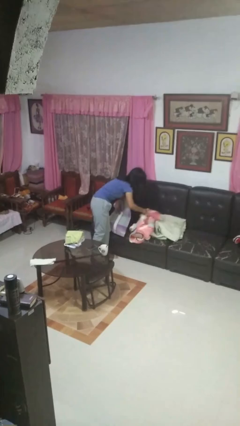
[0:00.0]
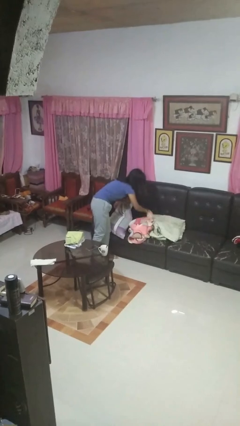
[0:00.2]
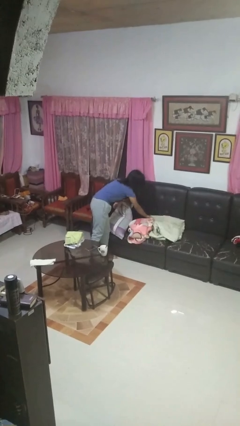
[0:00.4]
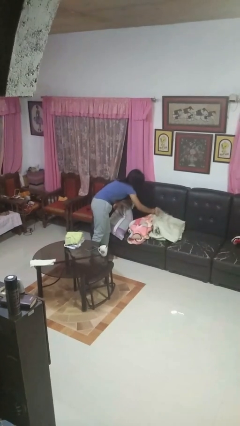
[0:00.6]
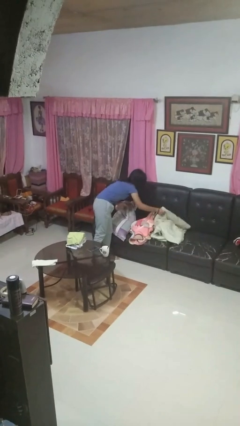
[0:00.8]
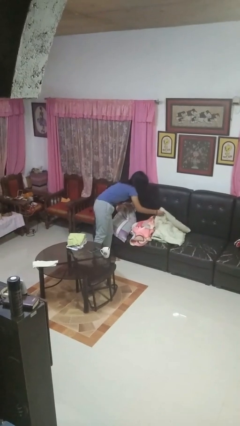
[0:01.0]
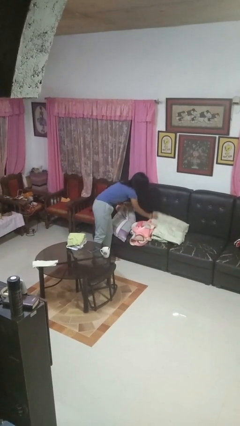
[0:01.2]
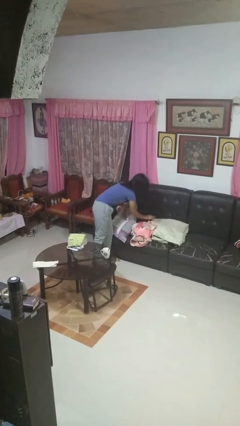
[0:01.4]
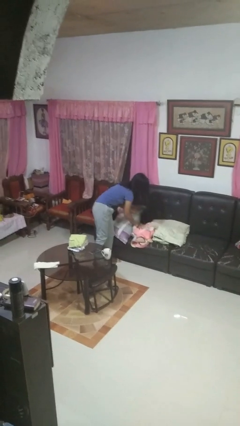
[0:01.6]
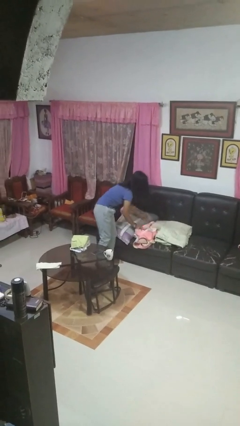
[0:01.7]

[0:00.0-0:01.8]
person searches in couch

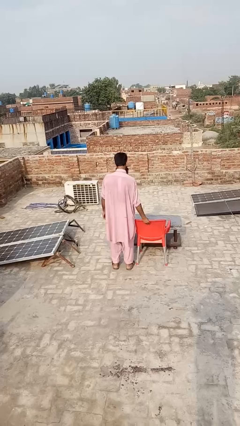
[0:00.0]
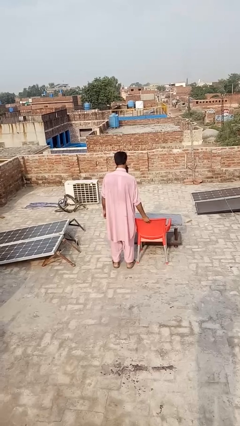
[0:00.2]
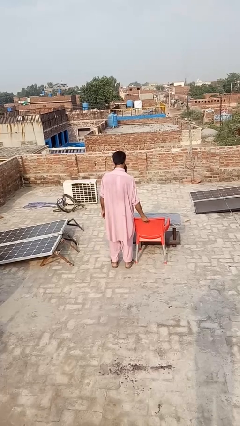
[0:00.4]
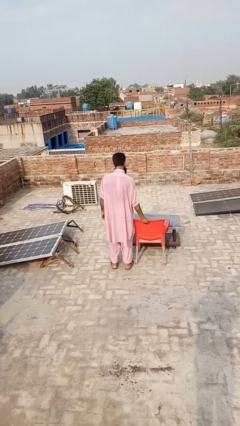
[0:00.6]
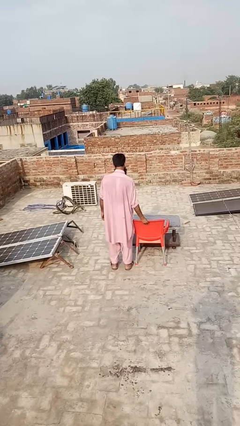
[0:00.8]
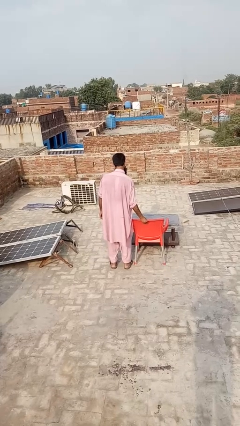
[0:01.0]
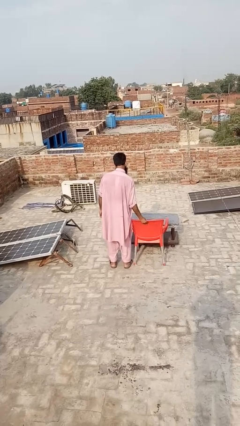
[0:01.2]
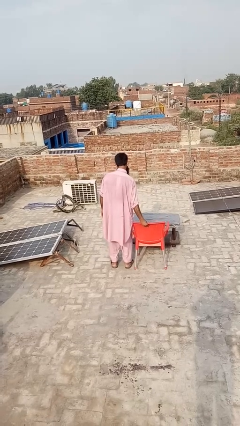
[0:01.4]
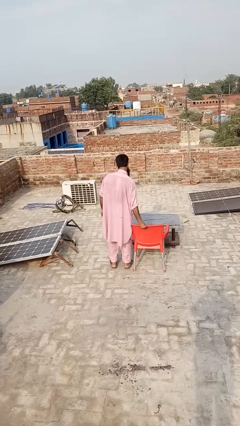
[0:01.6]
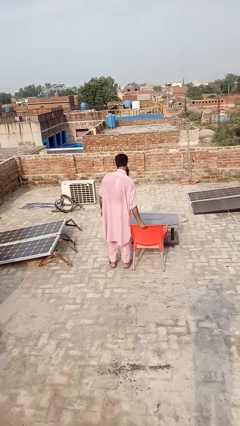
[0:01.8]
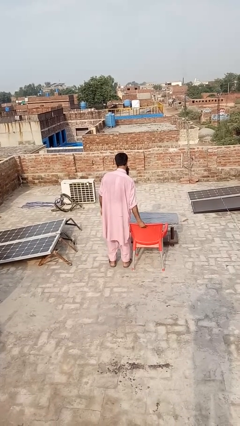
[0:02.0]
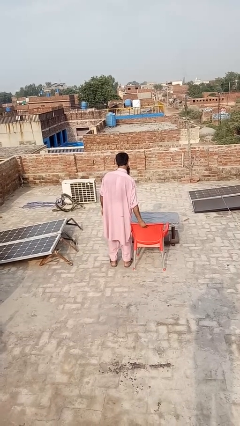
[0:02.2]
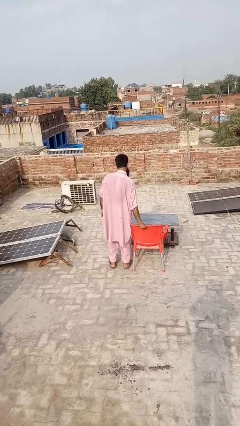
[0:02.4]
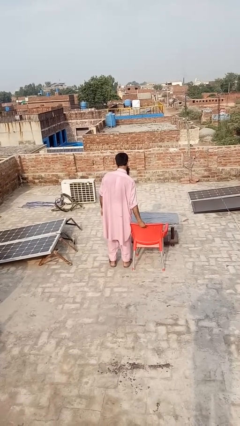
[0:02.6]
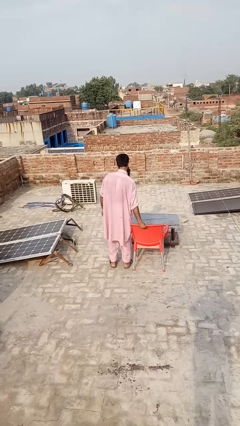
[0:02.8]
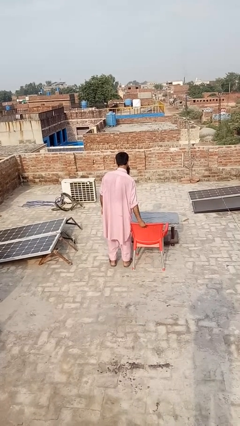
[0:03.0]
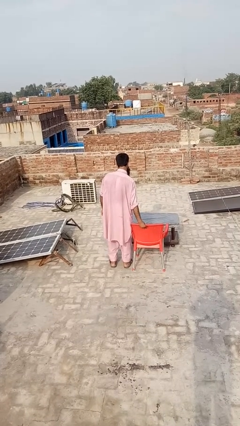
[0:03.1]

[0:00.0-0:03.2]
person pulls out chair

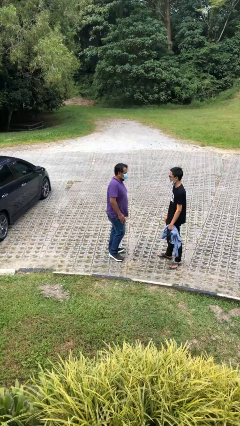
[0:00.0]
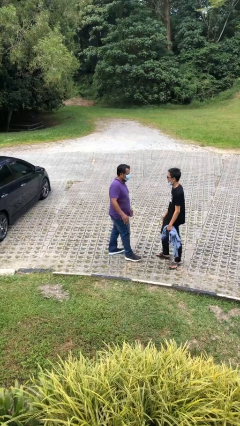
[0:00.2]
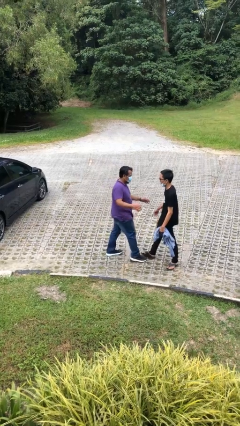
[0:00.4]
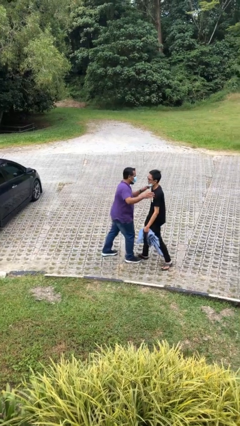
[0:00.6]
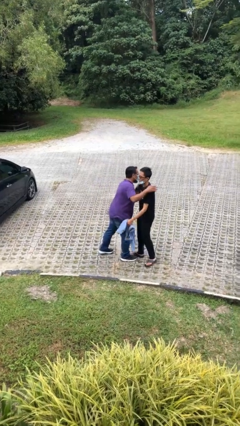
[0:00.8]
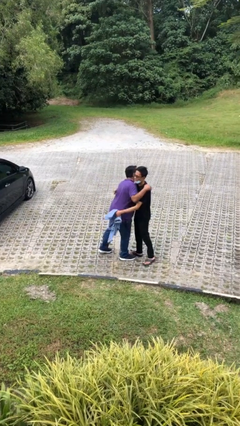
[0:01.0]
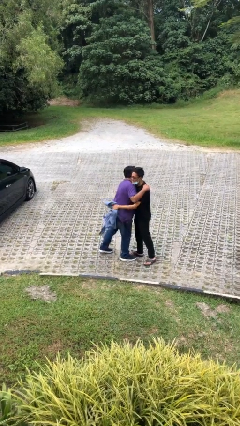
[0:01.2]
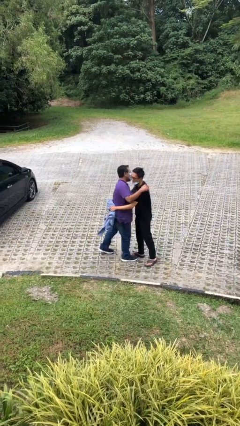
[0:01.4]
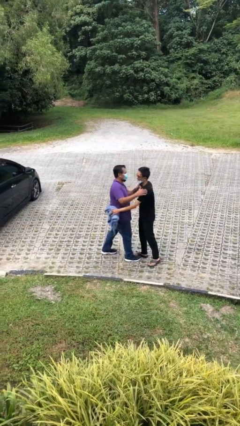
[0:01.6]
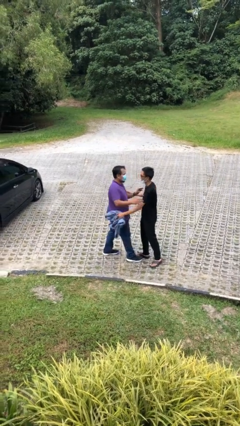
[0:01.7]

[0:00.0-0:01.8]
person embraces person

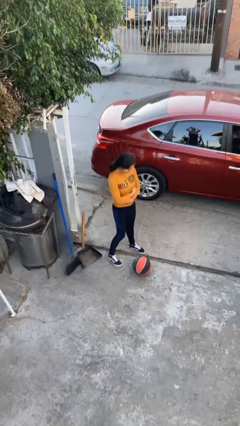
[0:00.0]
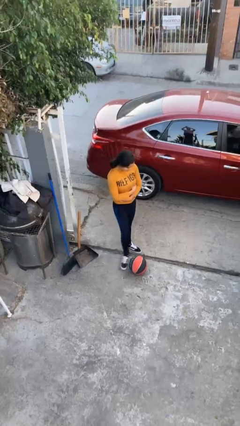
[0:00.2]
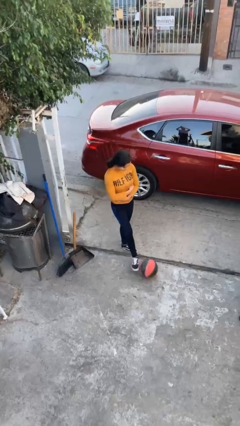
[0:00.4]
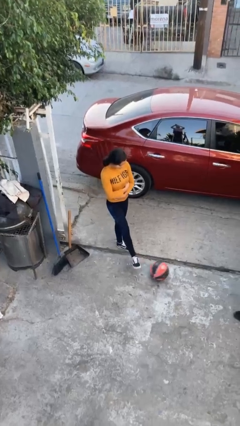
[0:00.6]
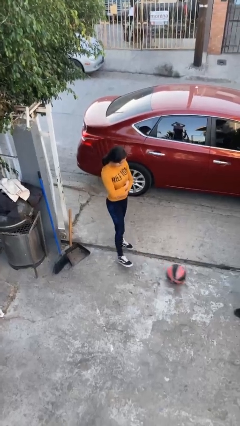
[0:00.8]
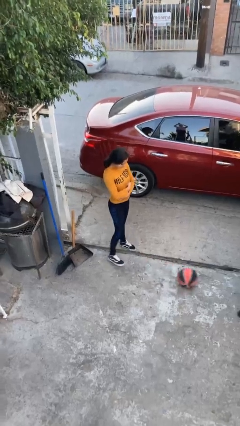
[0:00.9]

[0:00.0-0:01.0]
person kicks object to person

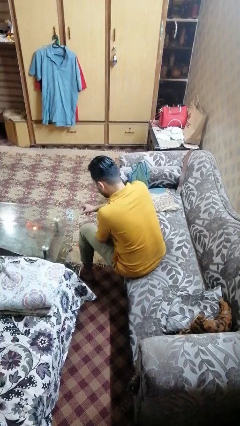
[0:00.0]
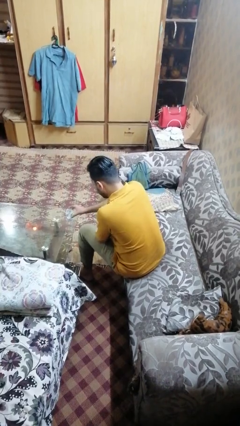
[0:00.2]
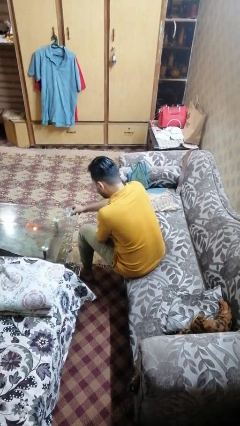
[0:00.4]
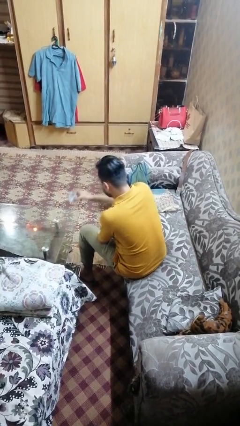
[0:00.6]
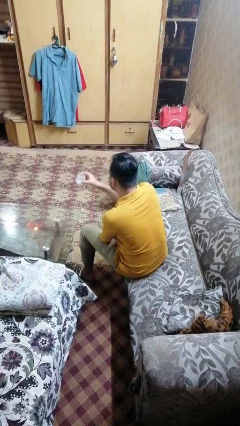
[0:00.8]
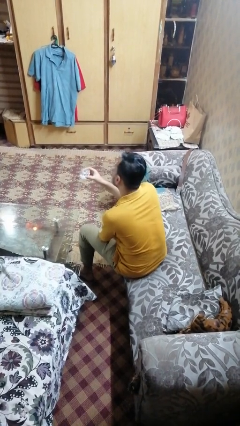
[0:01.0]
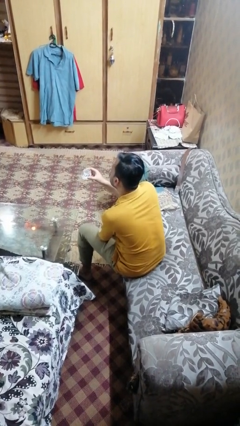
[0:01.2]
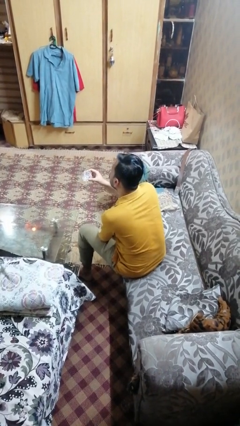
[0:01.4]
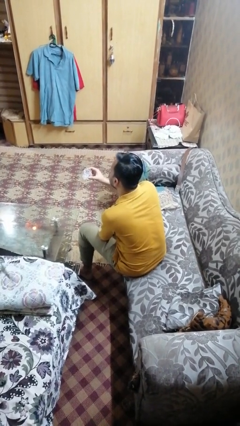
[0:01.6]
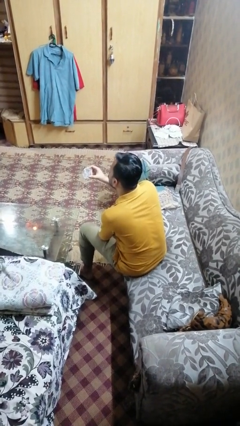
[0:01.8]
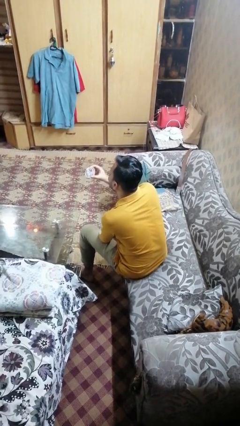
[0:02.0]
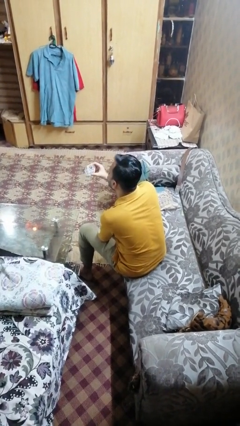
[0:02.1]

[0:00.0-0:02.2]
person picks up object from table

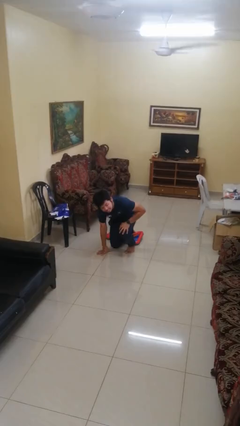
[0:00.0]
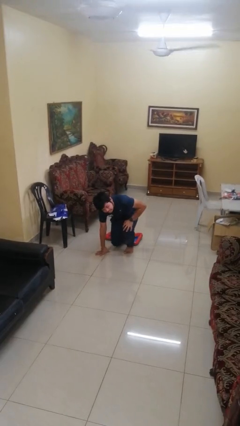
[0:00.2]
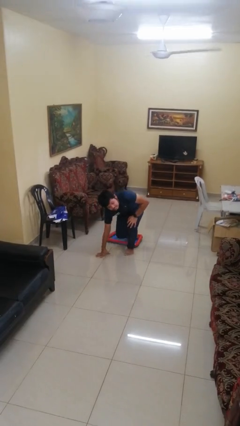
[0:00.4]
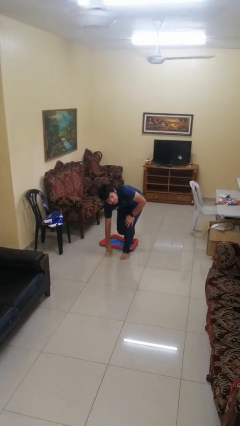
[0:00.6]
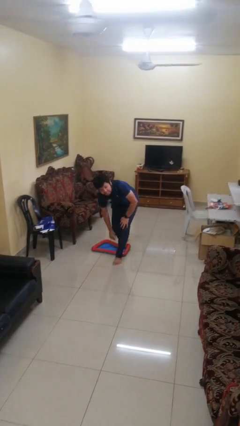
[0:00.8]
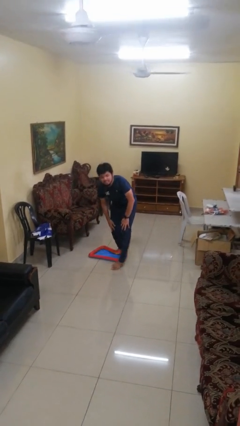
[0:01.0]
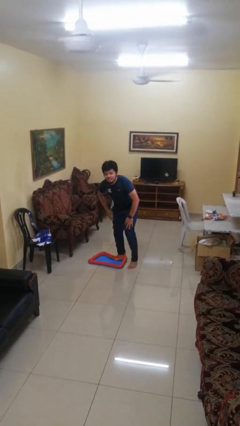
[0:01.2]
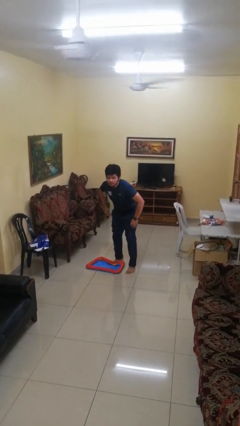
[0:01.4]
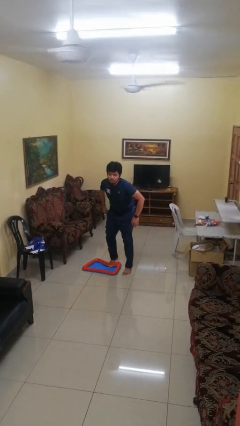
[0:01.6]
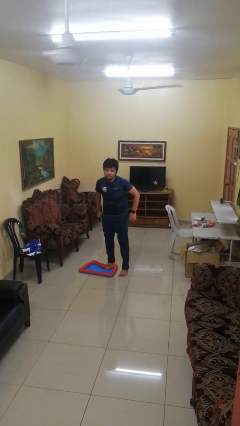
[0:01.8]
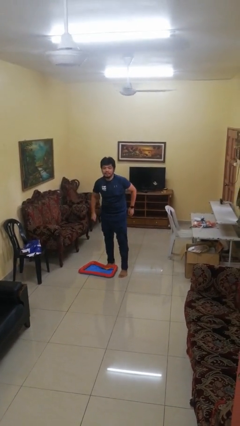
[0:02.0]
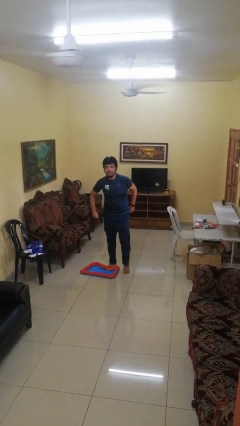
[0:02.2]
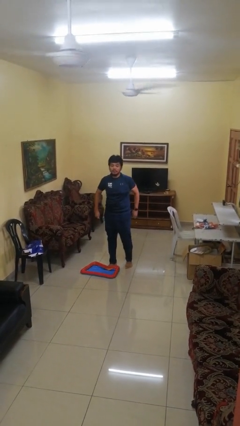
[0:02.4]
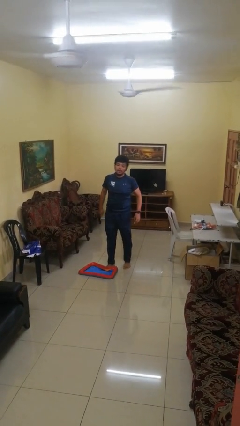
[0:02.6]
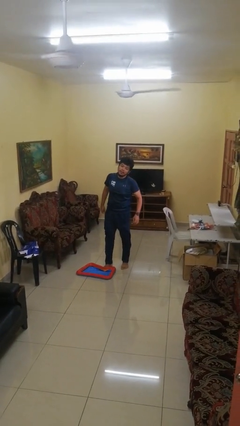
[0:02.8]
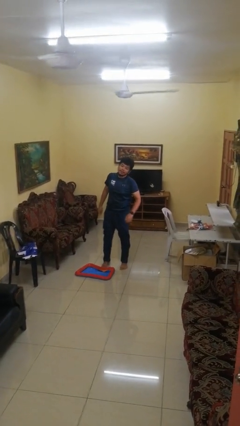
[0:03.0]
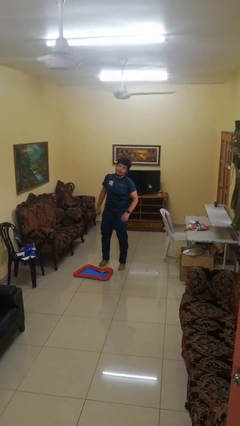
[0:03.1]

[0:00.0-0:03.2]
person stands up from floor

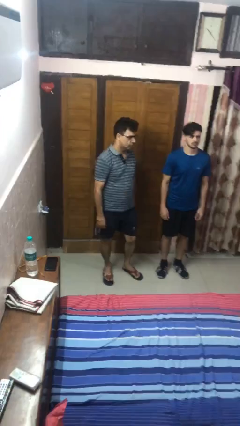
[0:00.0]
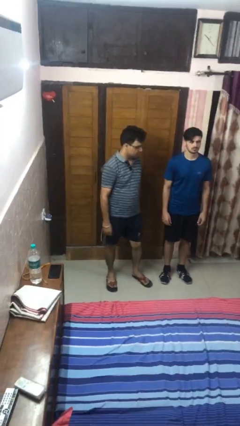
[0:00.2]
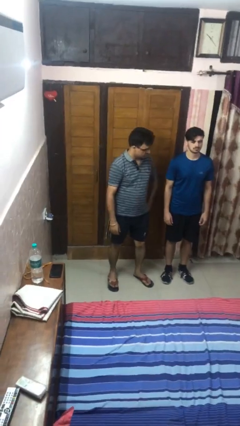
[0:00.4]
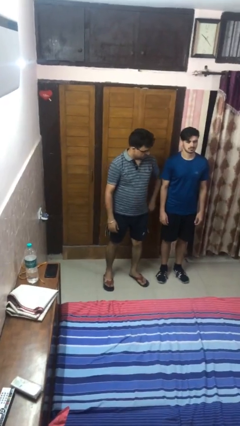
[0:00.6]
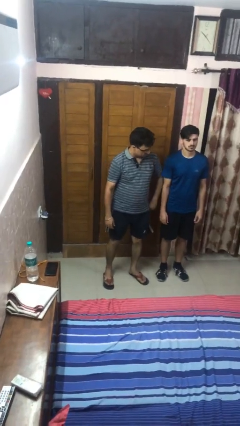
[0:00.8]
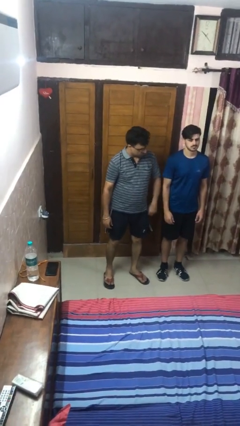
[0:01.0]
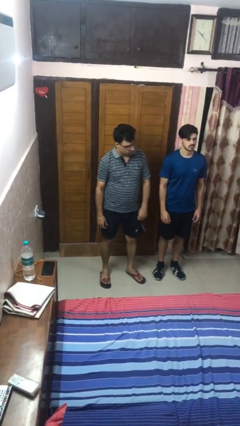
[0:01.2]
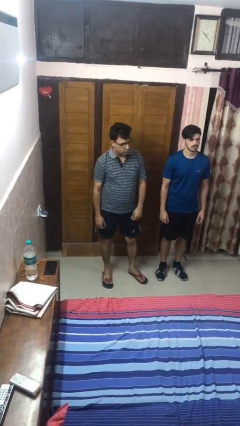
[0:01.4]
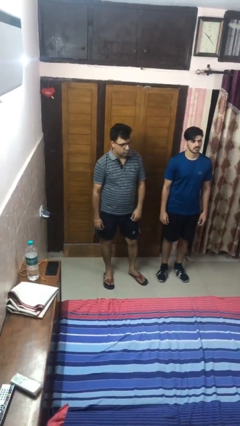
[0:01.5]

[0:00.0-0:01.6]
person nudges person with elbow

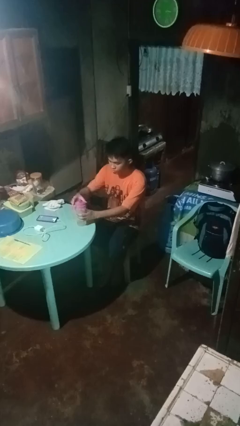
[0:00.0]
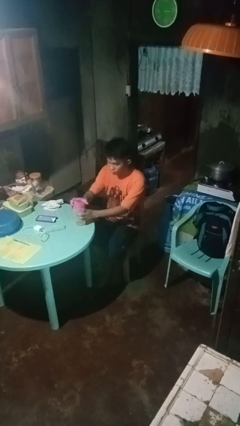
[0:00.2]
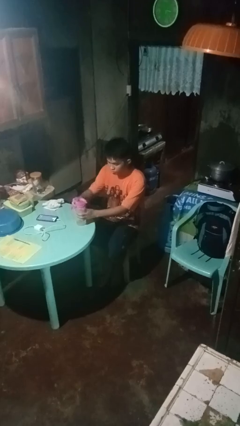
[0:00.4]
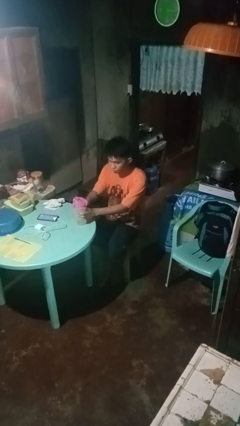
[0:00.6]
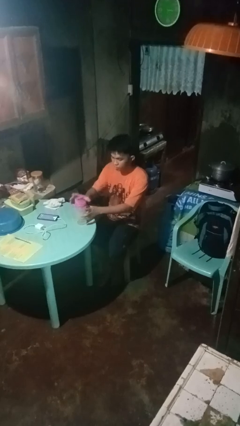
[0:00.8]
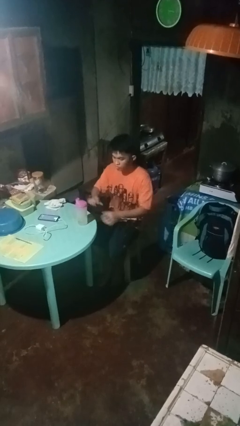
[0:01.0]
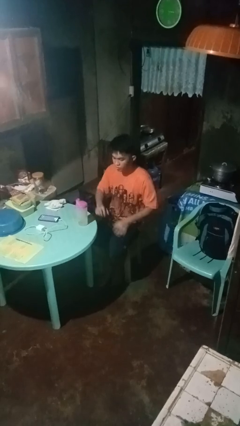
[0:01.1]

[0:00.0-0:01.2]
person screws lid to bottle

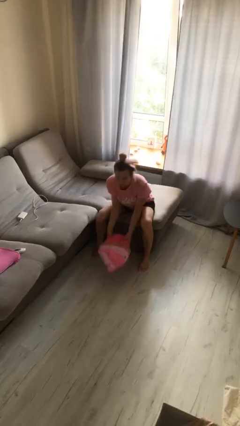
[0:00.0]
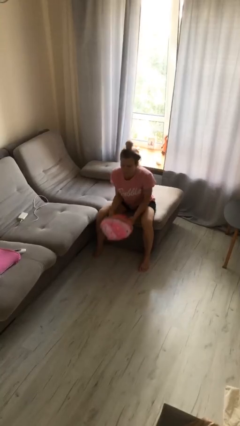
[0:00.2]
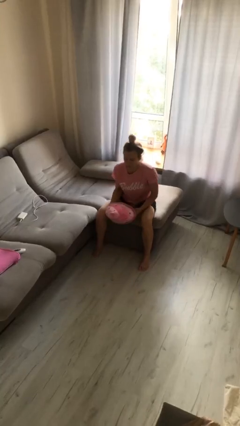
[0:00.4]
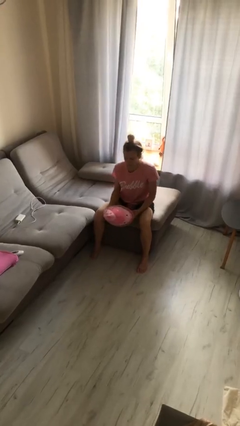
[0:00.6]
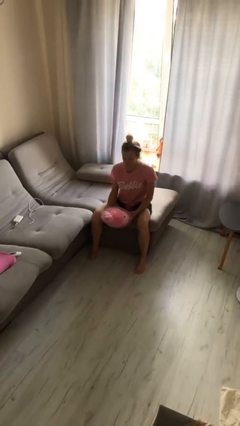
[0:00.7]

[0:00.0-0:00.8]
person picks up object from floor
